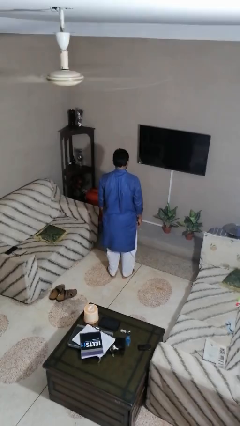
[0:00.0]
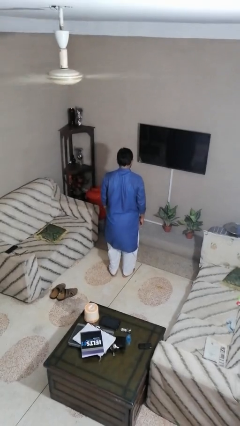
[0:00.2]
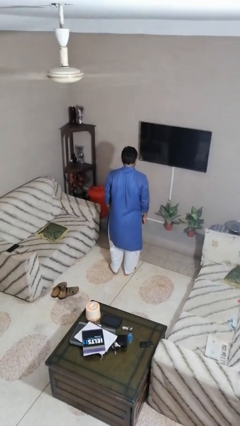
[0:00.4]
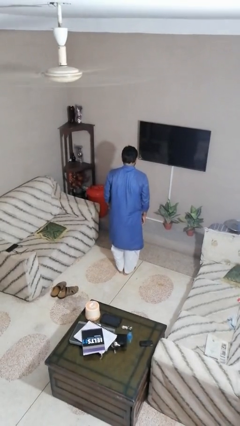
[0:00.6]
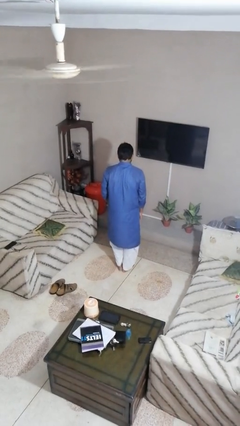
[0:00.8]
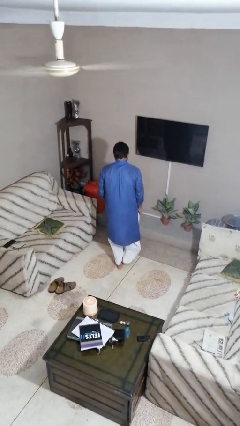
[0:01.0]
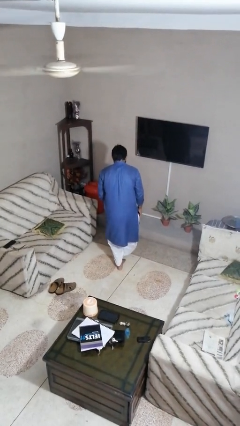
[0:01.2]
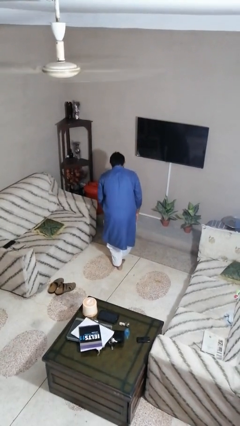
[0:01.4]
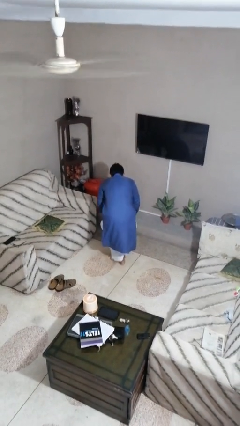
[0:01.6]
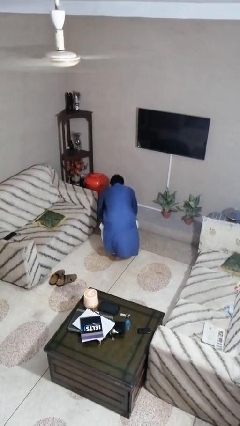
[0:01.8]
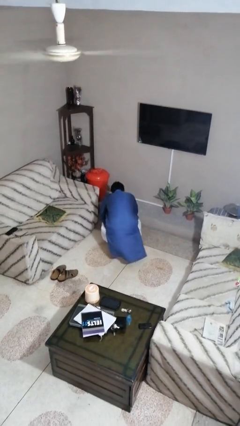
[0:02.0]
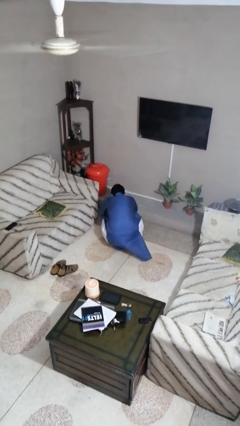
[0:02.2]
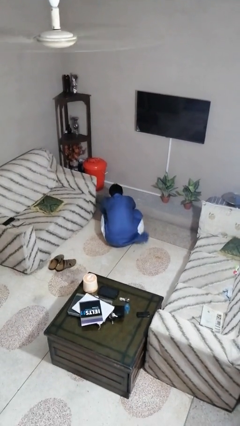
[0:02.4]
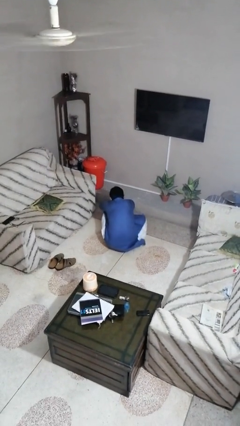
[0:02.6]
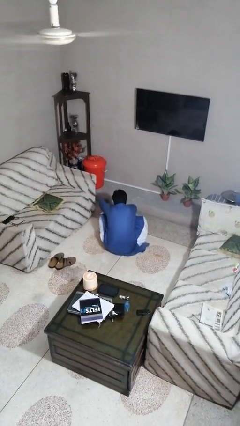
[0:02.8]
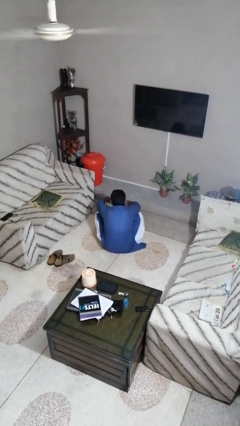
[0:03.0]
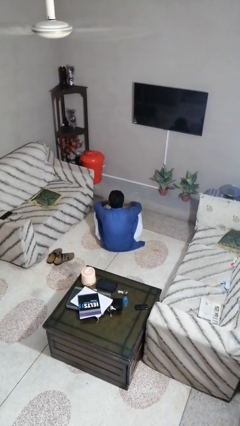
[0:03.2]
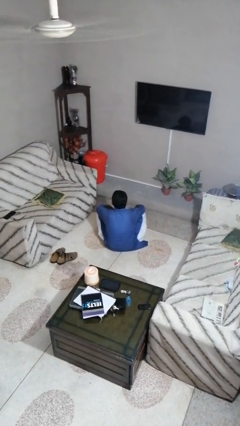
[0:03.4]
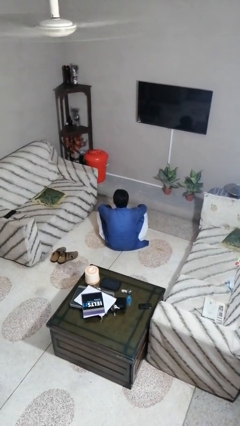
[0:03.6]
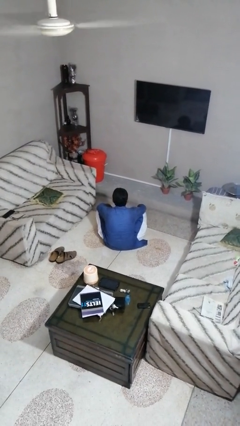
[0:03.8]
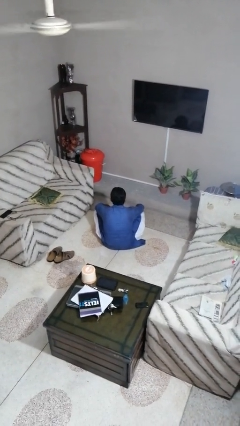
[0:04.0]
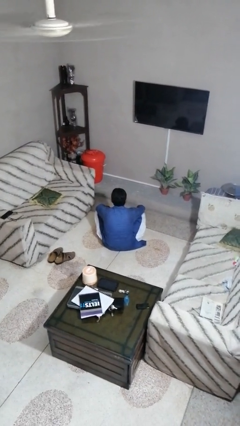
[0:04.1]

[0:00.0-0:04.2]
person sits crisscross

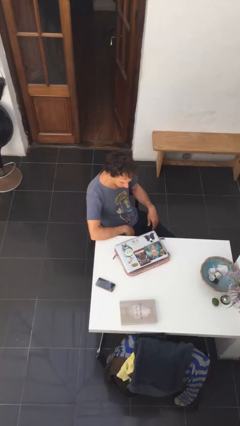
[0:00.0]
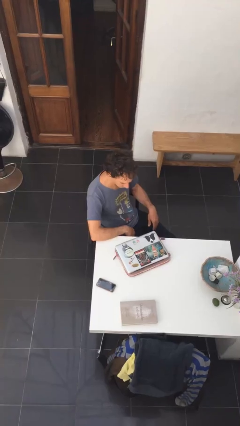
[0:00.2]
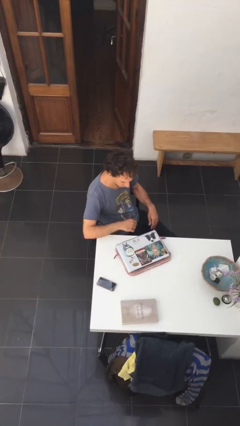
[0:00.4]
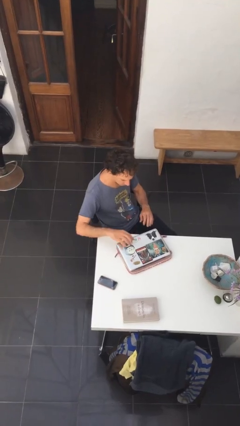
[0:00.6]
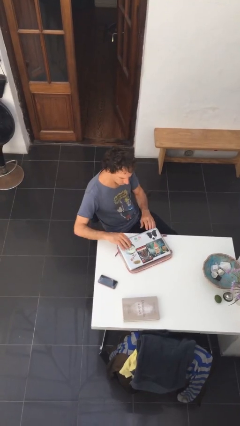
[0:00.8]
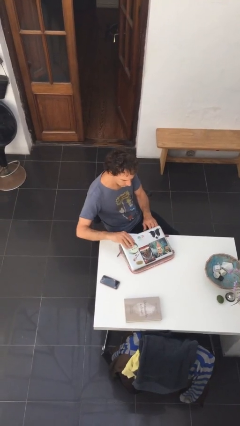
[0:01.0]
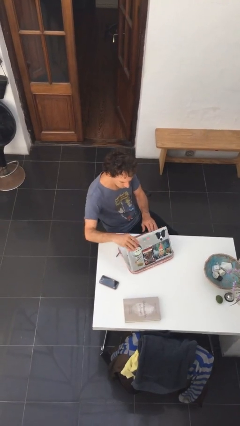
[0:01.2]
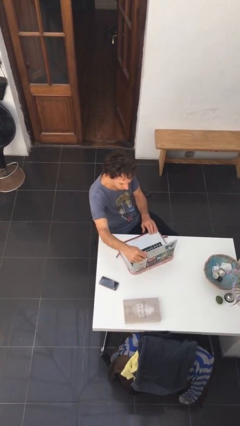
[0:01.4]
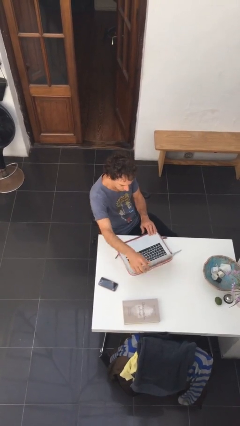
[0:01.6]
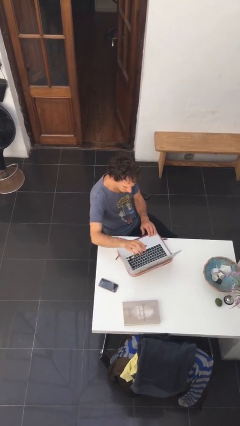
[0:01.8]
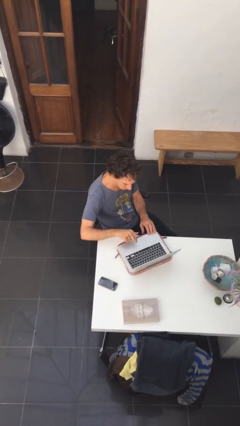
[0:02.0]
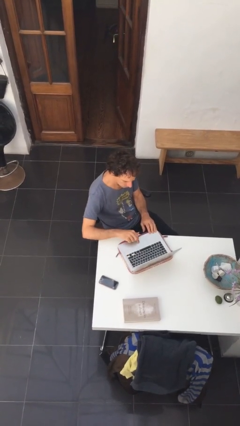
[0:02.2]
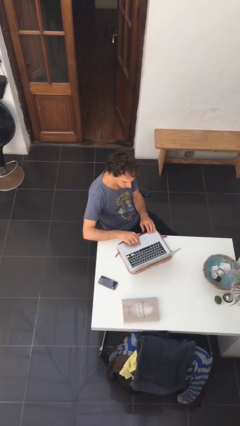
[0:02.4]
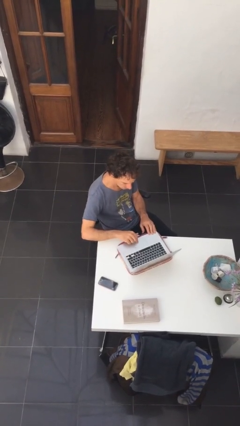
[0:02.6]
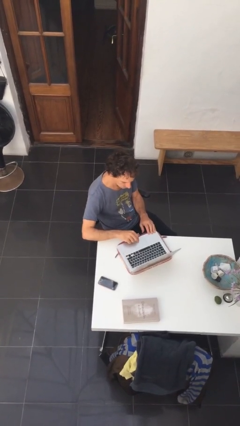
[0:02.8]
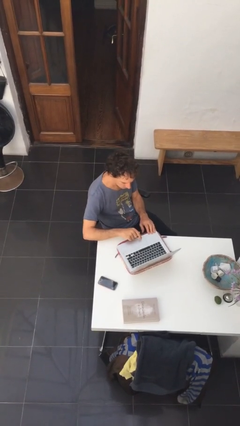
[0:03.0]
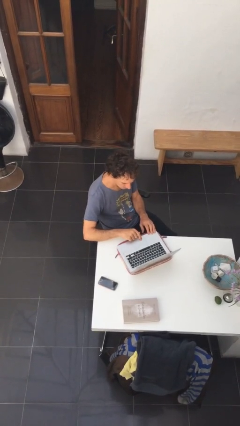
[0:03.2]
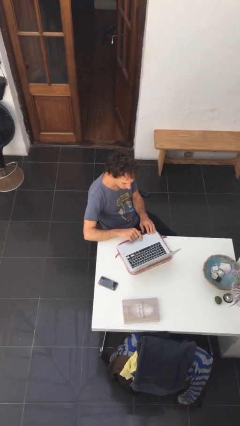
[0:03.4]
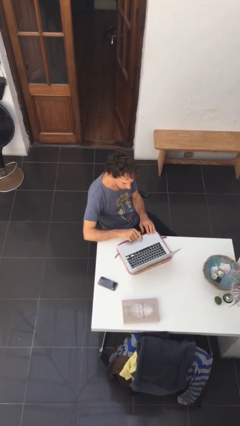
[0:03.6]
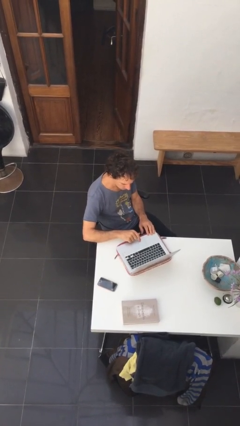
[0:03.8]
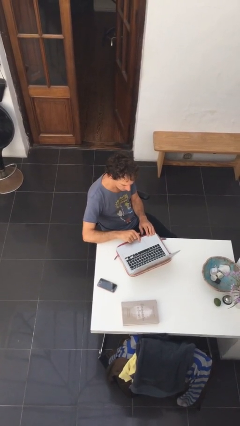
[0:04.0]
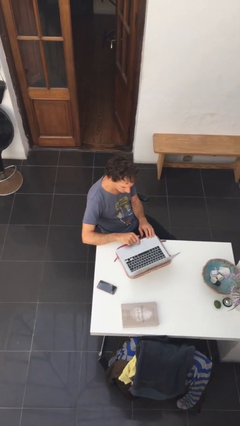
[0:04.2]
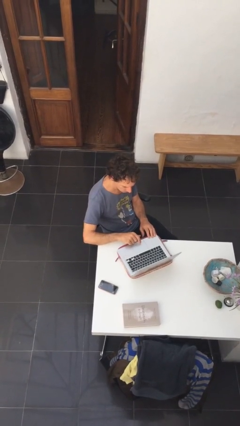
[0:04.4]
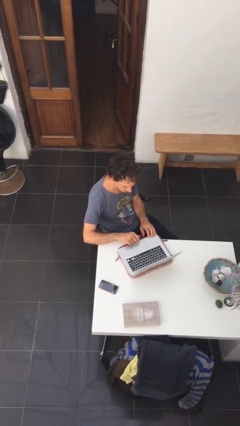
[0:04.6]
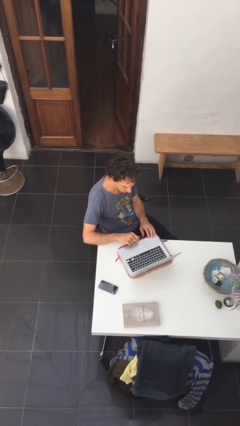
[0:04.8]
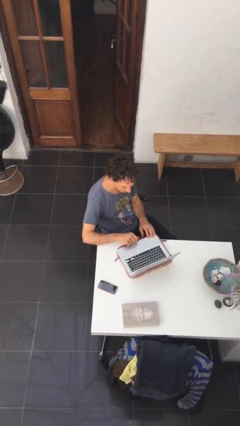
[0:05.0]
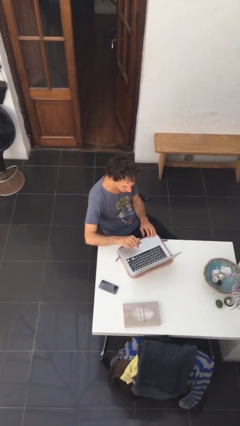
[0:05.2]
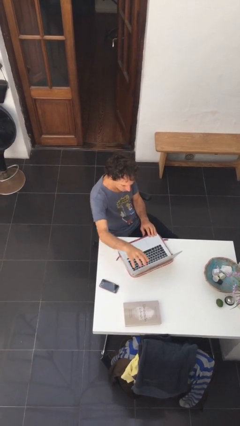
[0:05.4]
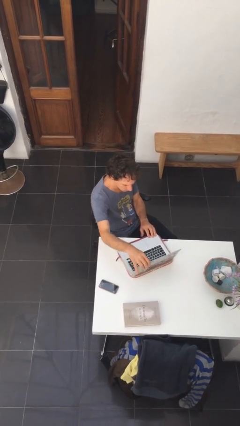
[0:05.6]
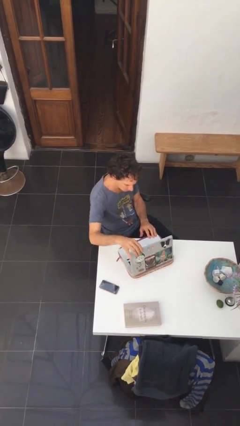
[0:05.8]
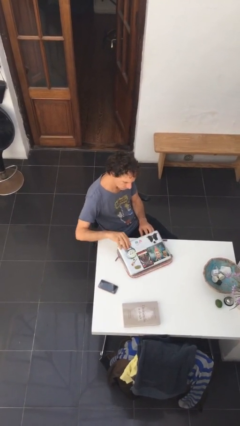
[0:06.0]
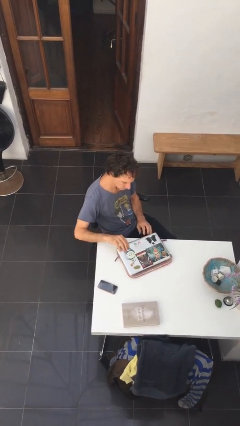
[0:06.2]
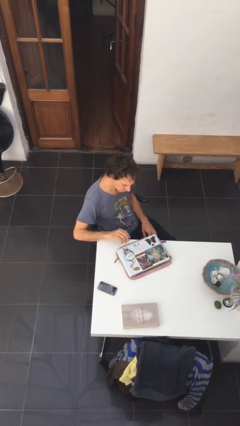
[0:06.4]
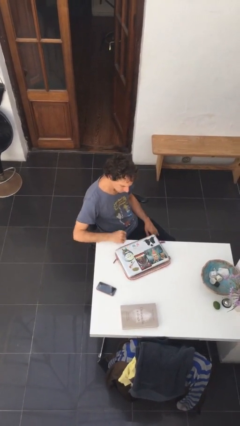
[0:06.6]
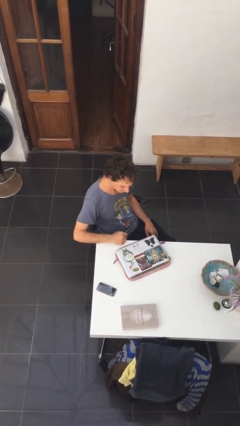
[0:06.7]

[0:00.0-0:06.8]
person interacts with laptop

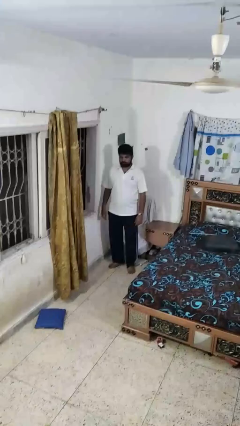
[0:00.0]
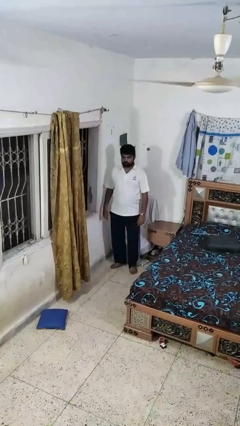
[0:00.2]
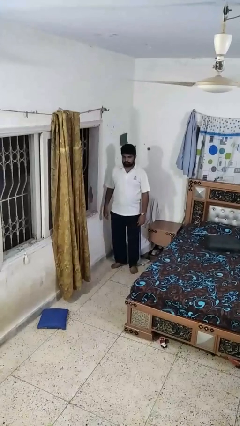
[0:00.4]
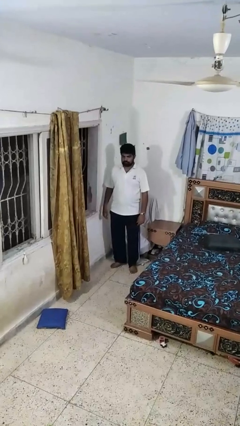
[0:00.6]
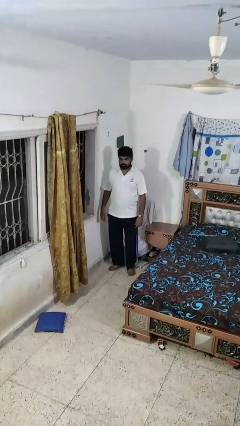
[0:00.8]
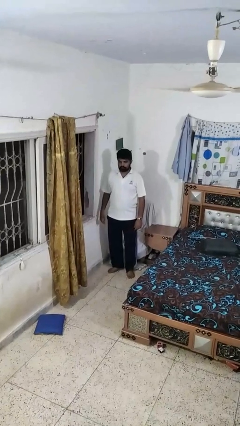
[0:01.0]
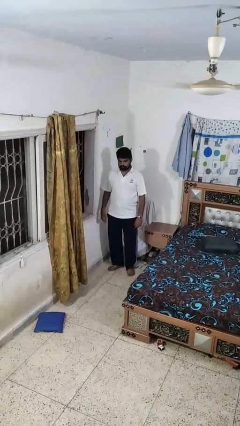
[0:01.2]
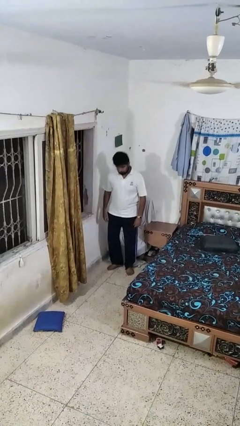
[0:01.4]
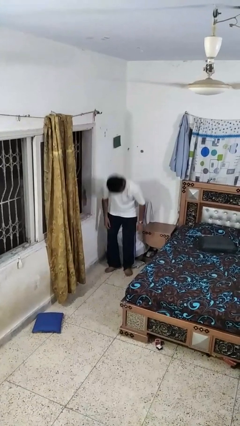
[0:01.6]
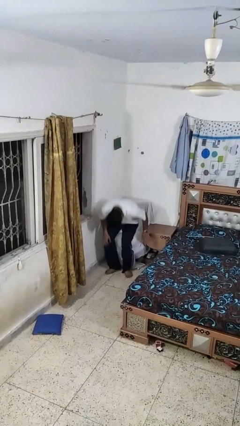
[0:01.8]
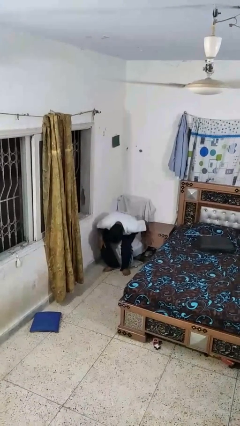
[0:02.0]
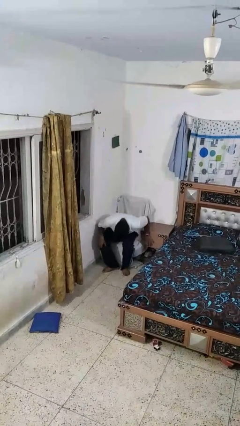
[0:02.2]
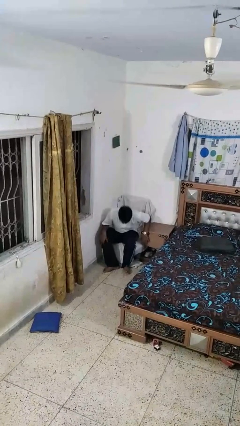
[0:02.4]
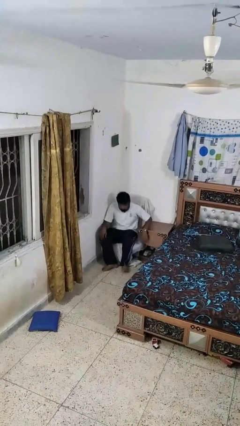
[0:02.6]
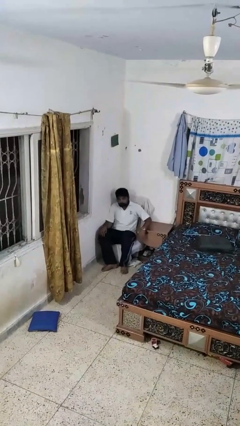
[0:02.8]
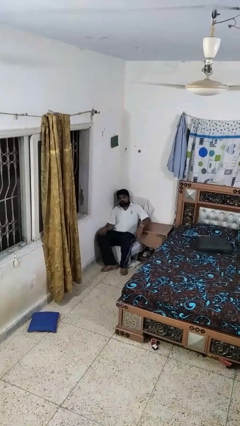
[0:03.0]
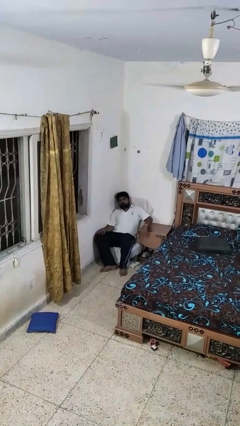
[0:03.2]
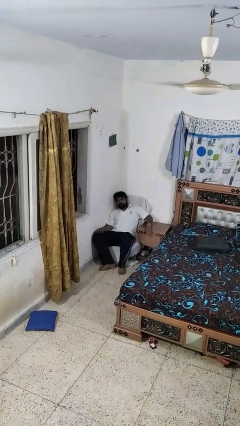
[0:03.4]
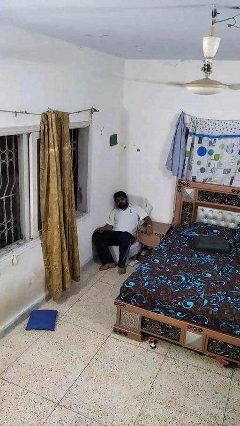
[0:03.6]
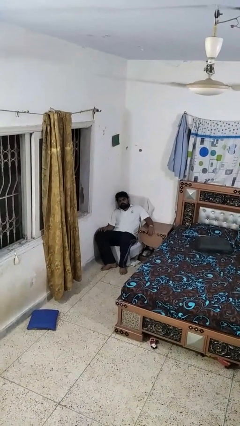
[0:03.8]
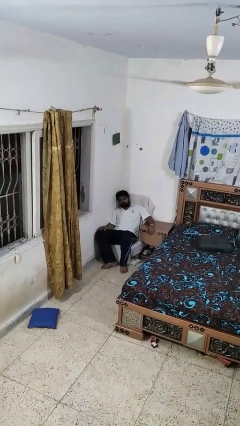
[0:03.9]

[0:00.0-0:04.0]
person lies down on couch

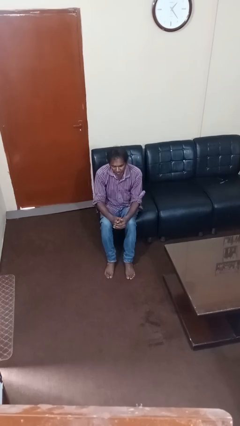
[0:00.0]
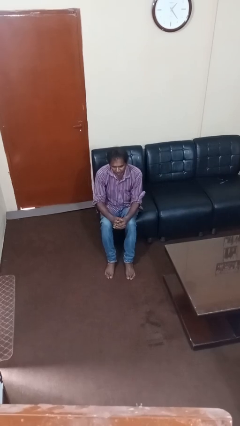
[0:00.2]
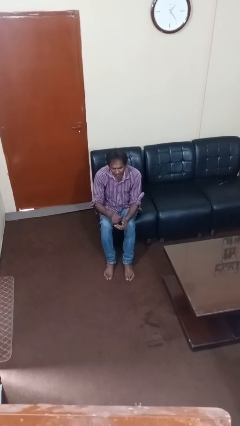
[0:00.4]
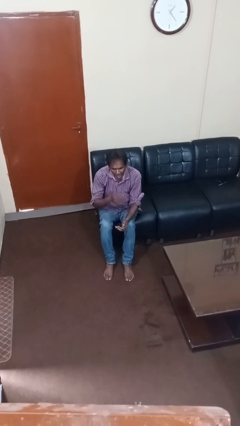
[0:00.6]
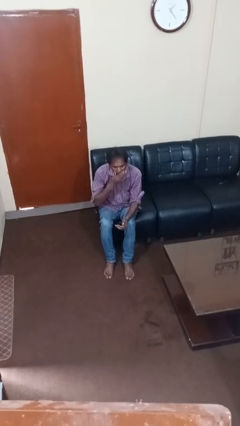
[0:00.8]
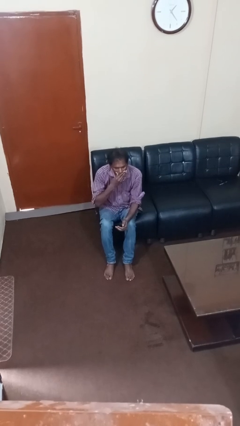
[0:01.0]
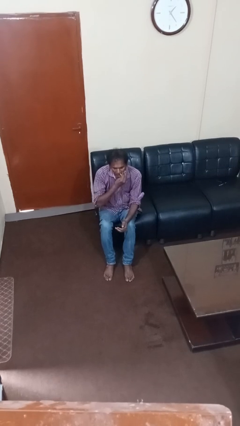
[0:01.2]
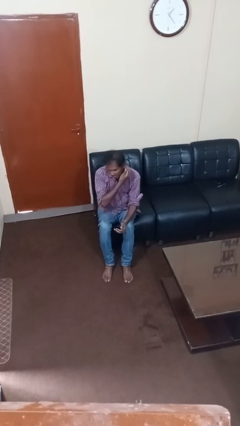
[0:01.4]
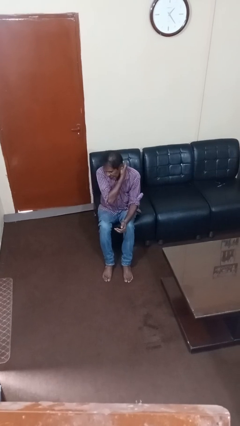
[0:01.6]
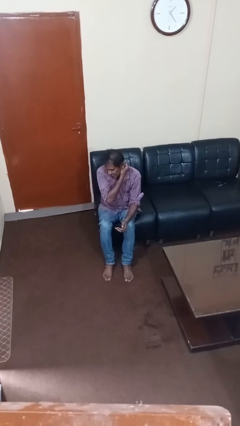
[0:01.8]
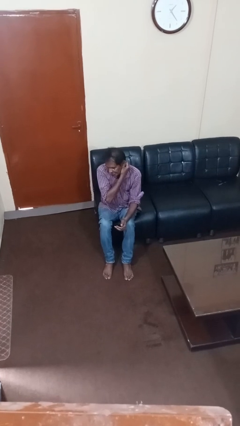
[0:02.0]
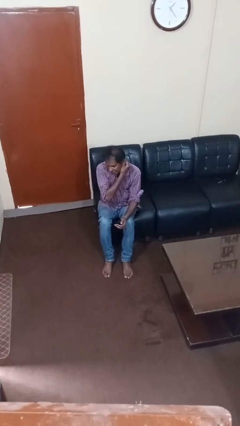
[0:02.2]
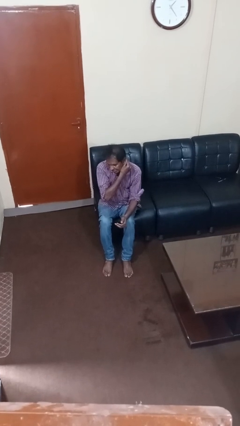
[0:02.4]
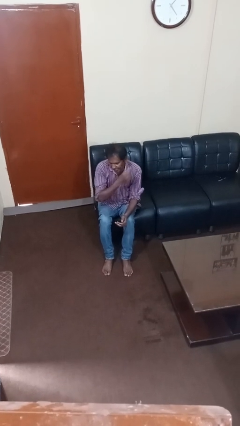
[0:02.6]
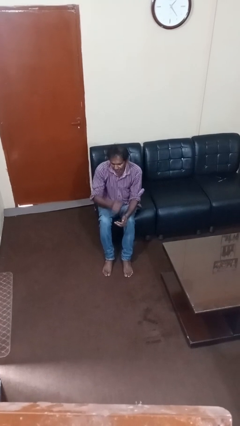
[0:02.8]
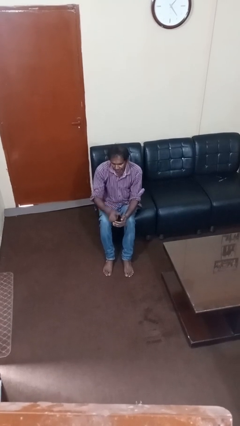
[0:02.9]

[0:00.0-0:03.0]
person yawns
